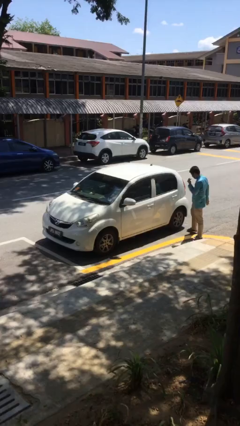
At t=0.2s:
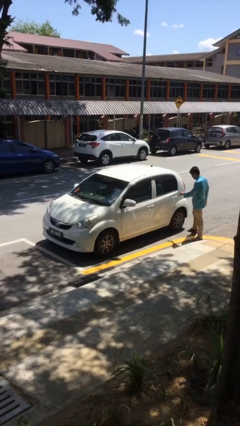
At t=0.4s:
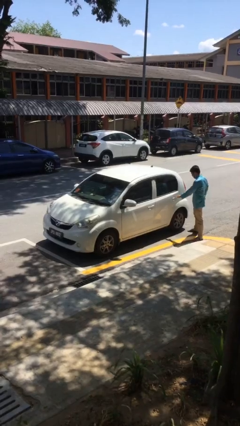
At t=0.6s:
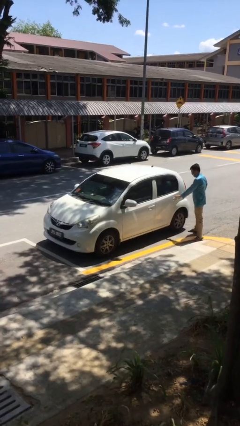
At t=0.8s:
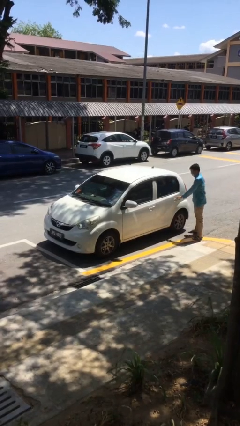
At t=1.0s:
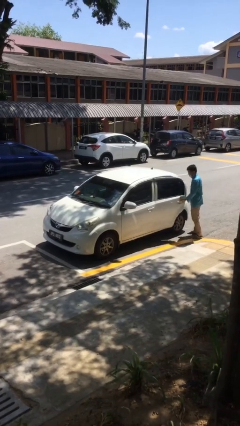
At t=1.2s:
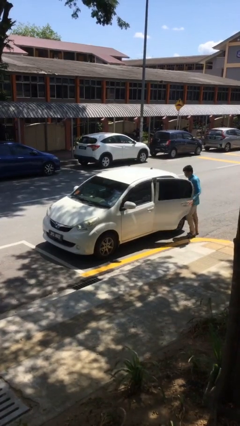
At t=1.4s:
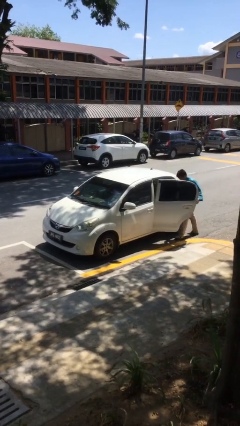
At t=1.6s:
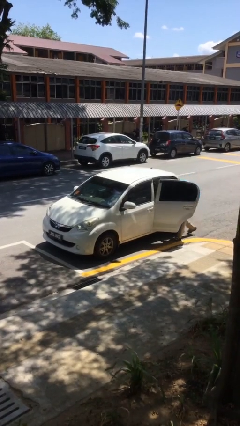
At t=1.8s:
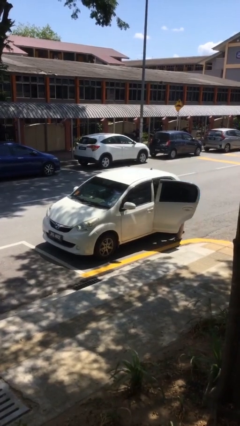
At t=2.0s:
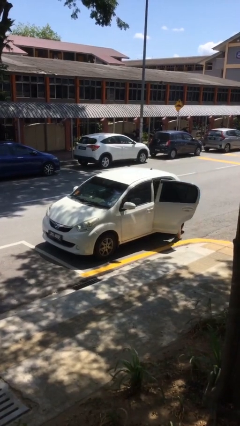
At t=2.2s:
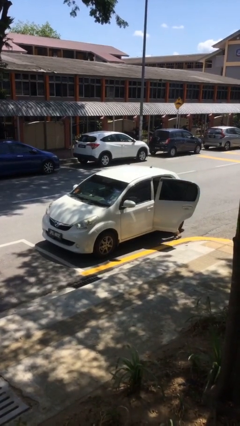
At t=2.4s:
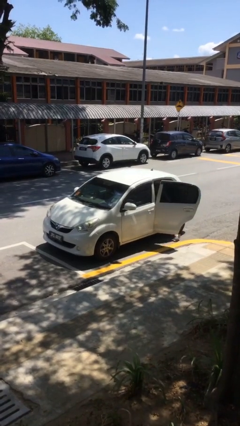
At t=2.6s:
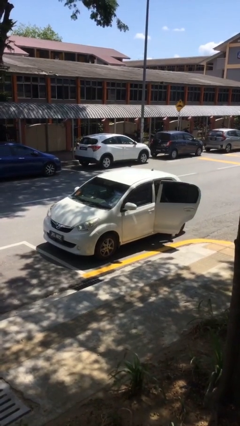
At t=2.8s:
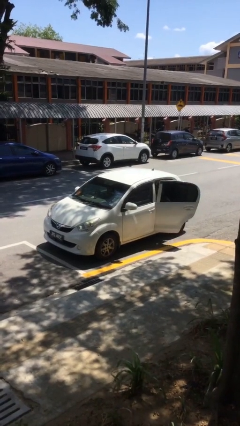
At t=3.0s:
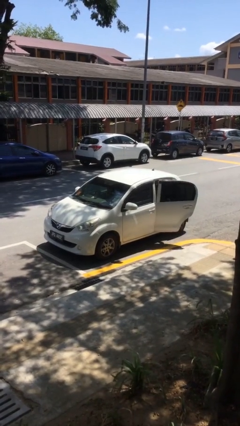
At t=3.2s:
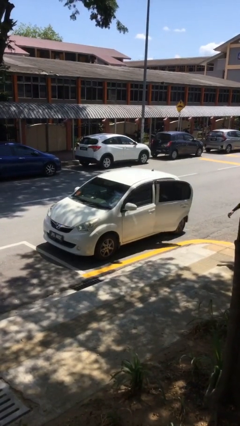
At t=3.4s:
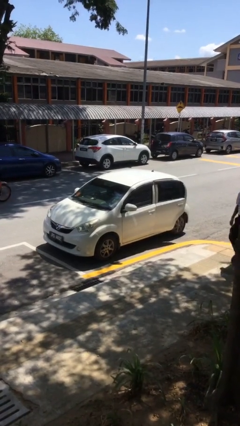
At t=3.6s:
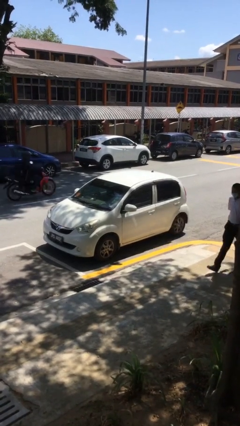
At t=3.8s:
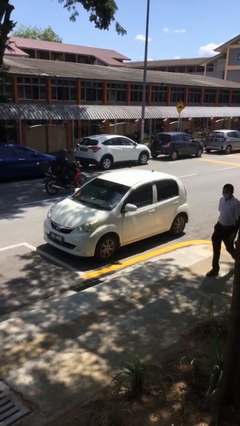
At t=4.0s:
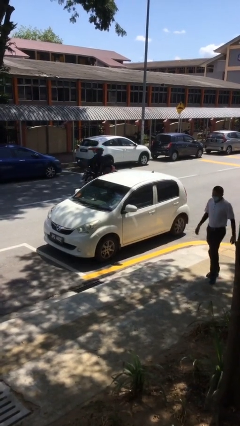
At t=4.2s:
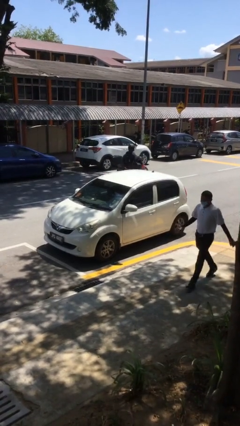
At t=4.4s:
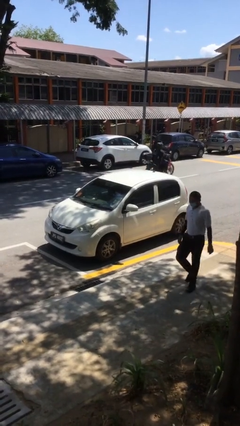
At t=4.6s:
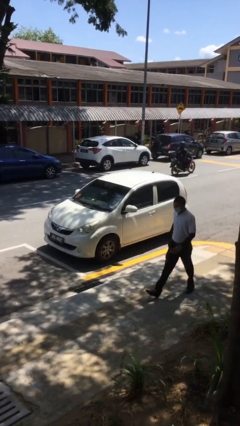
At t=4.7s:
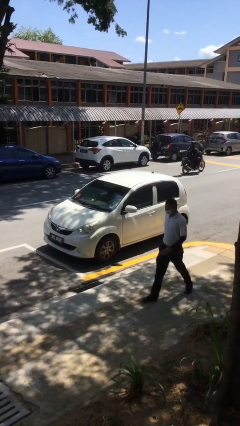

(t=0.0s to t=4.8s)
car picks up person

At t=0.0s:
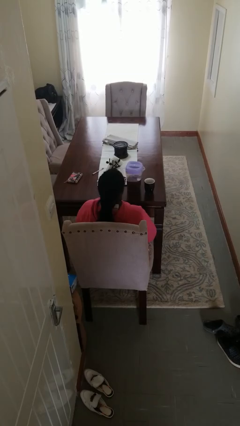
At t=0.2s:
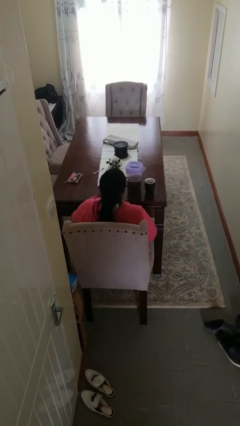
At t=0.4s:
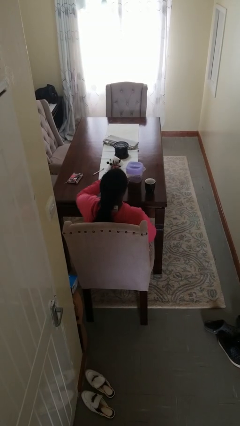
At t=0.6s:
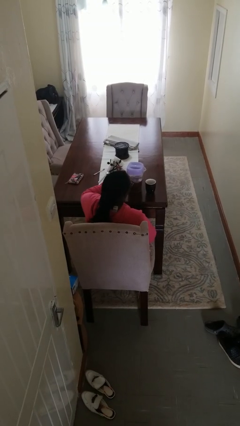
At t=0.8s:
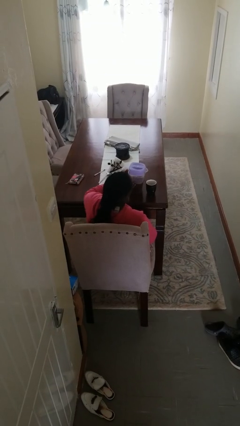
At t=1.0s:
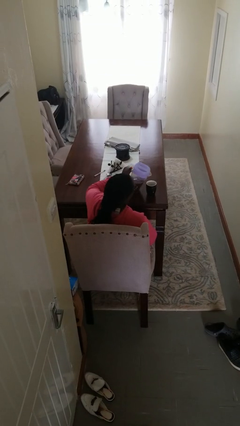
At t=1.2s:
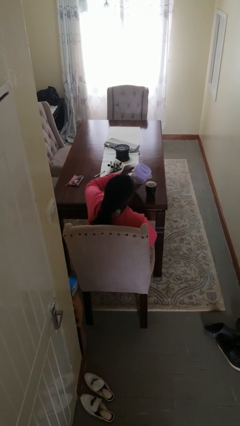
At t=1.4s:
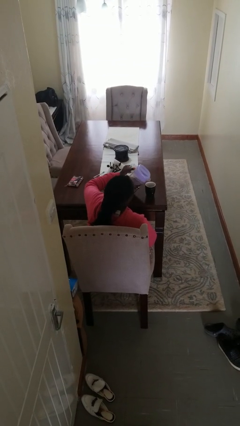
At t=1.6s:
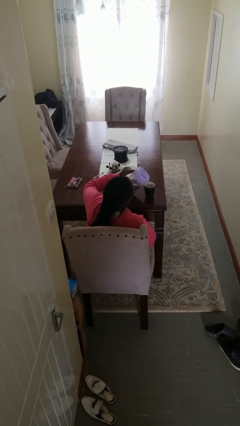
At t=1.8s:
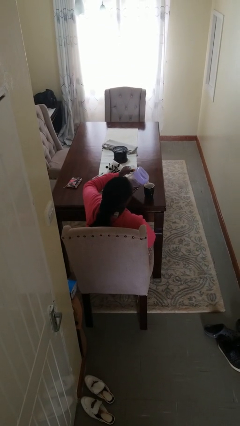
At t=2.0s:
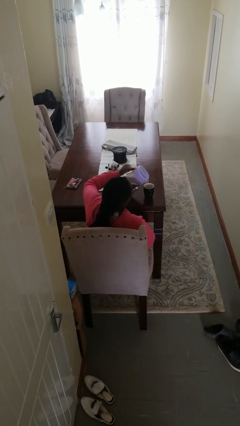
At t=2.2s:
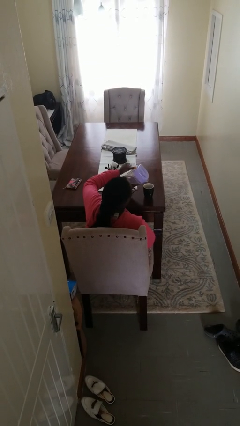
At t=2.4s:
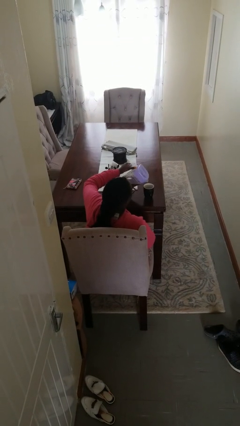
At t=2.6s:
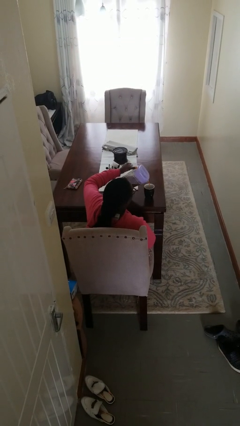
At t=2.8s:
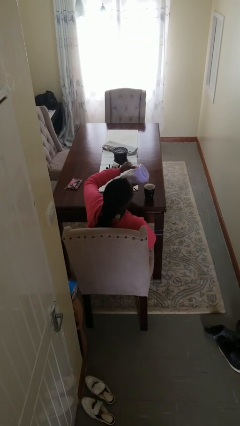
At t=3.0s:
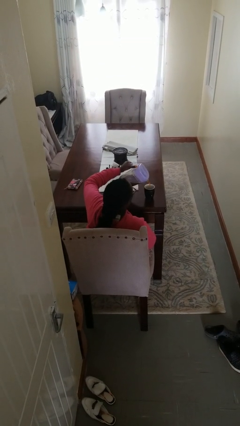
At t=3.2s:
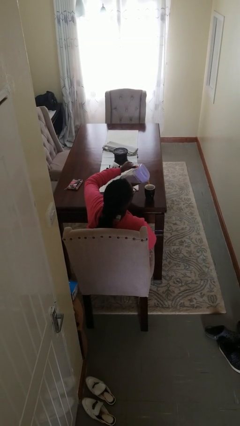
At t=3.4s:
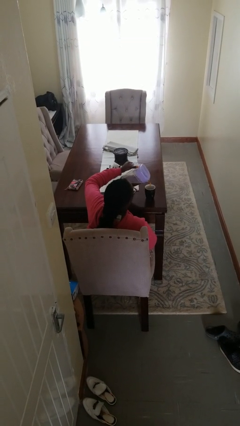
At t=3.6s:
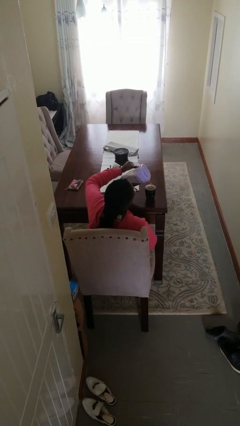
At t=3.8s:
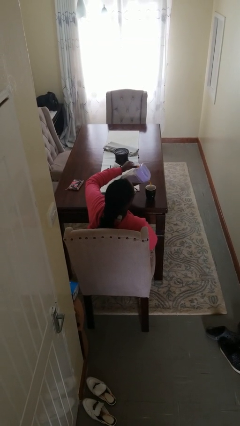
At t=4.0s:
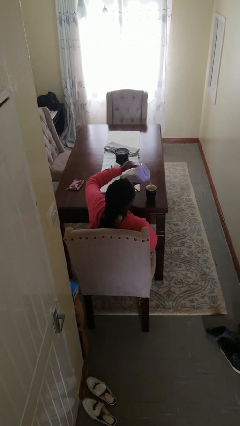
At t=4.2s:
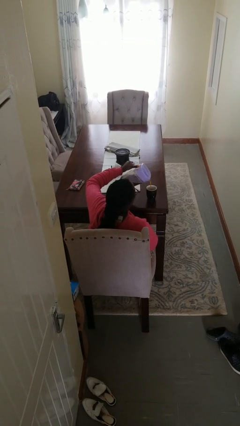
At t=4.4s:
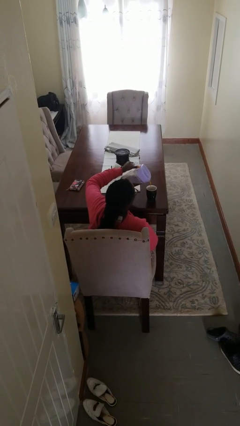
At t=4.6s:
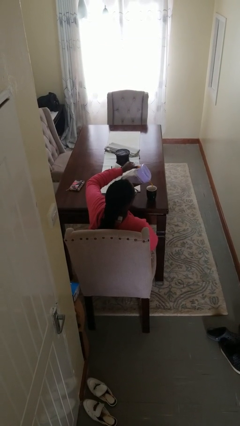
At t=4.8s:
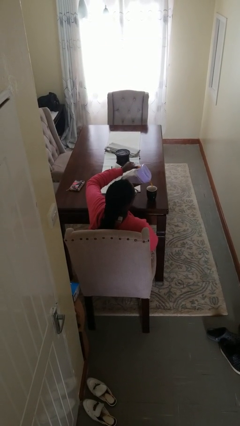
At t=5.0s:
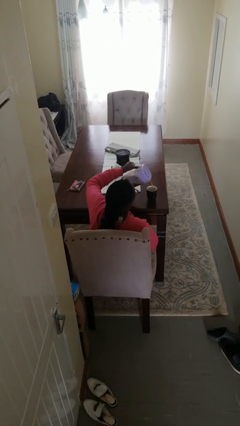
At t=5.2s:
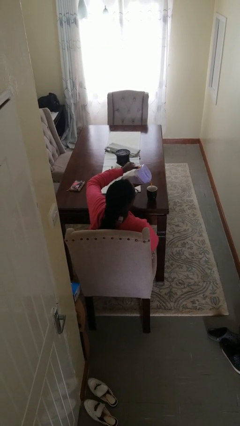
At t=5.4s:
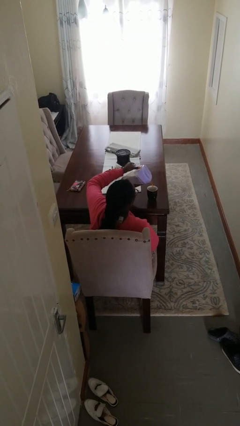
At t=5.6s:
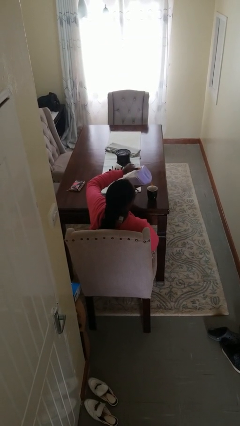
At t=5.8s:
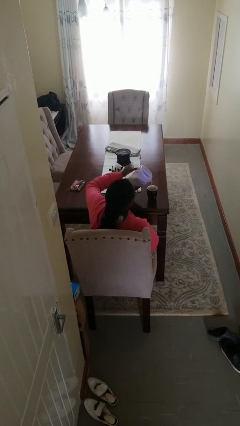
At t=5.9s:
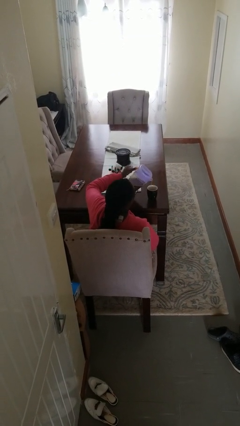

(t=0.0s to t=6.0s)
person pours coffee into mug

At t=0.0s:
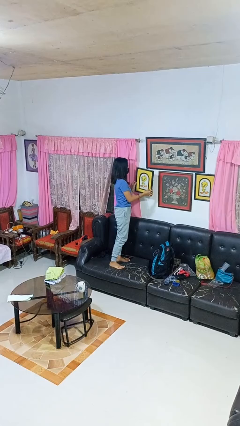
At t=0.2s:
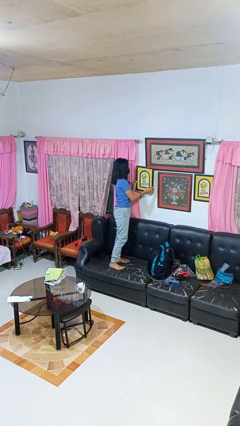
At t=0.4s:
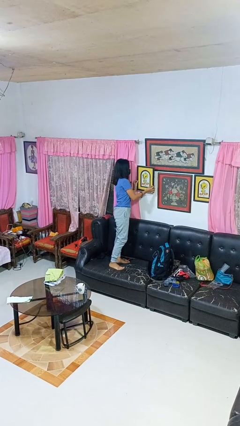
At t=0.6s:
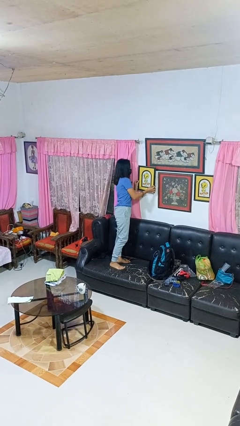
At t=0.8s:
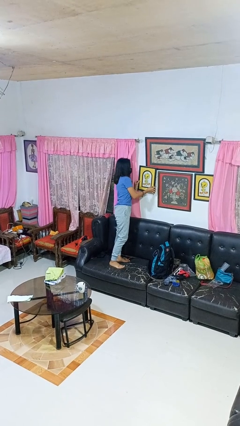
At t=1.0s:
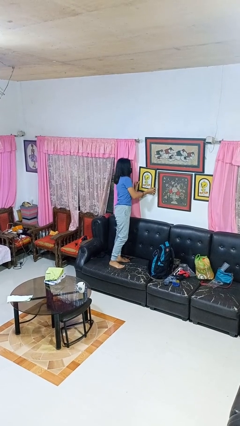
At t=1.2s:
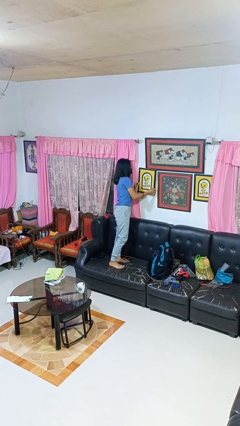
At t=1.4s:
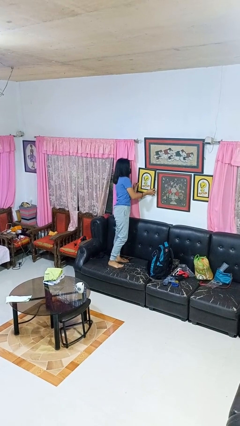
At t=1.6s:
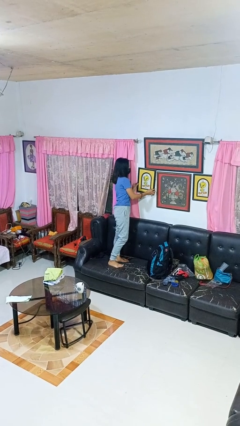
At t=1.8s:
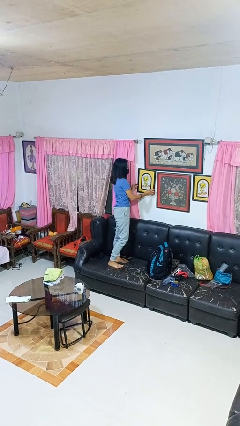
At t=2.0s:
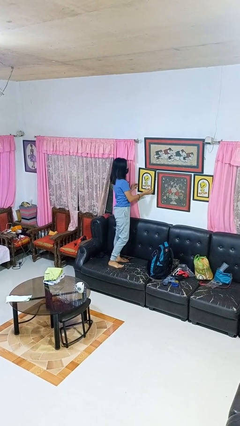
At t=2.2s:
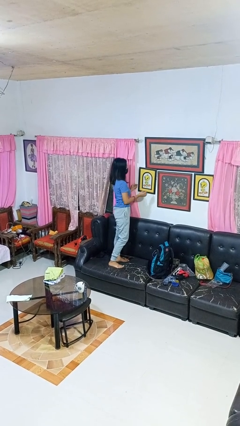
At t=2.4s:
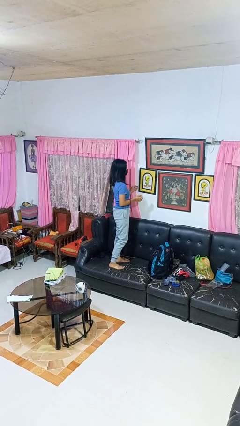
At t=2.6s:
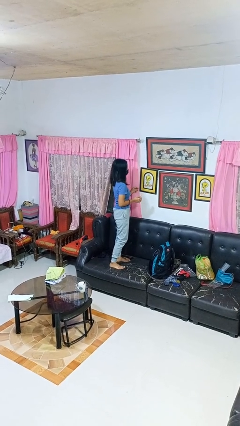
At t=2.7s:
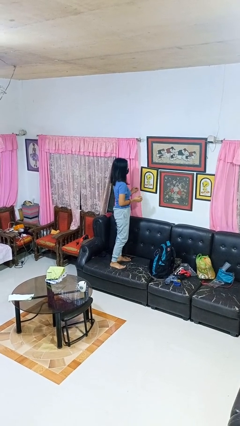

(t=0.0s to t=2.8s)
person puts up picture frame

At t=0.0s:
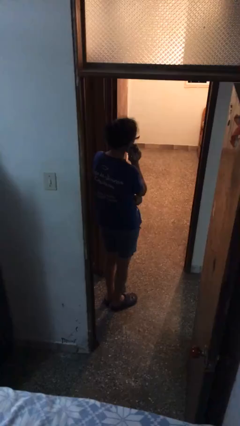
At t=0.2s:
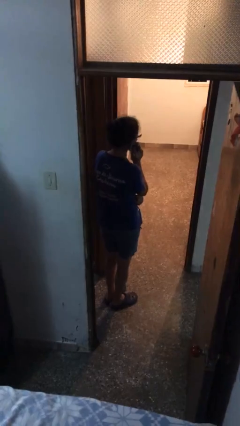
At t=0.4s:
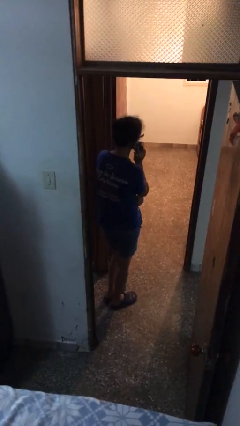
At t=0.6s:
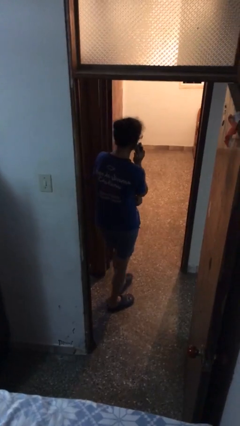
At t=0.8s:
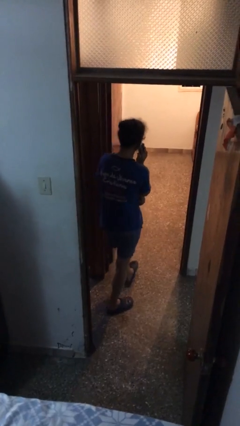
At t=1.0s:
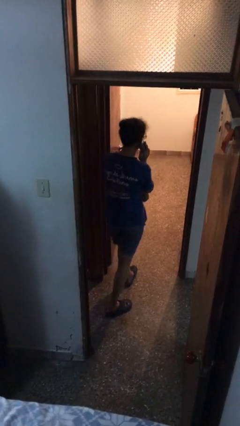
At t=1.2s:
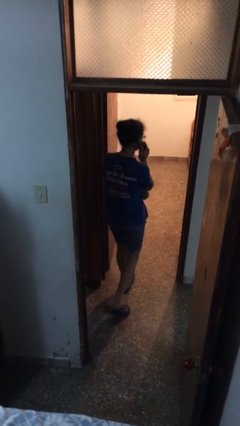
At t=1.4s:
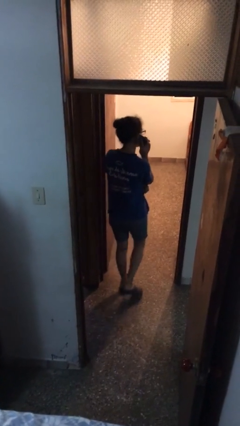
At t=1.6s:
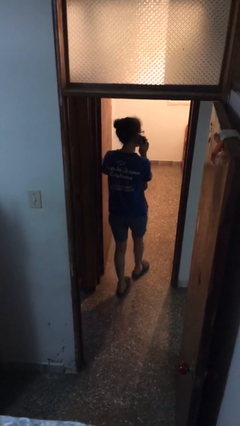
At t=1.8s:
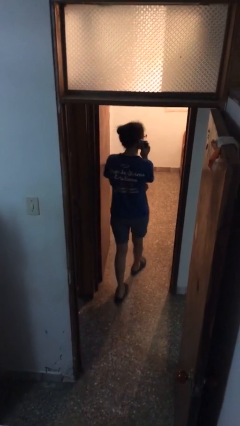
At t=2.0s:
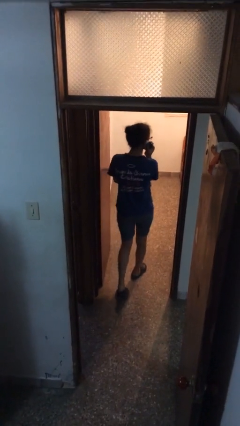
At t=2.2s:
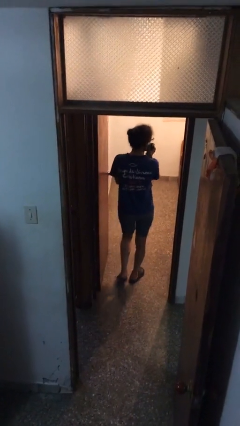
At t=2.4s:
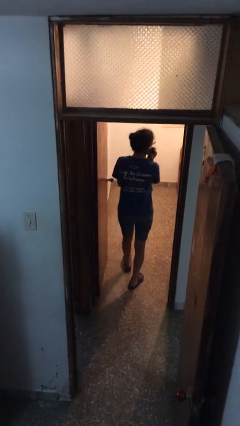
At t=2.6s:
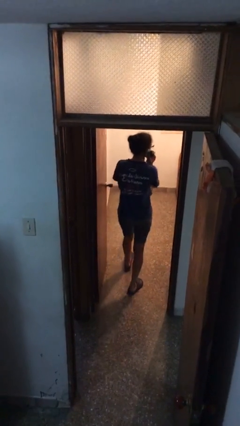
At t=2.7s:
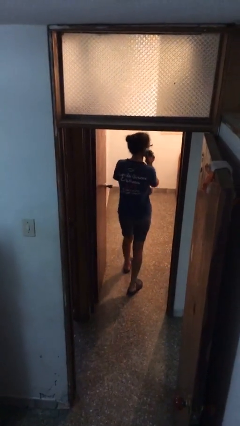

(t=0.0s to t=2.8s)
person exits scene through structure

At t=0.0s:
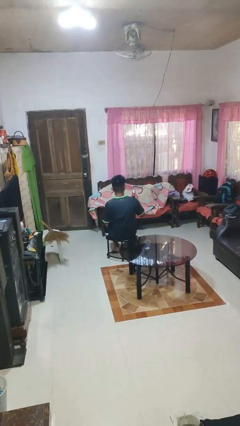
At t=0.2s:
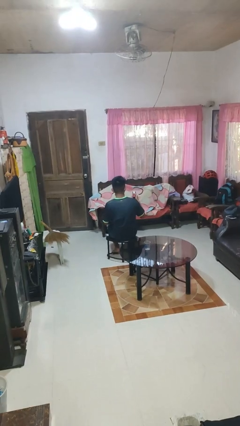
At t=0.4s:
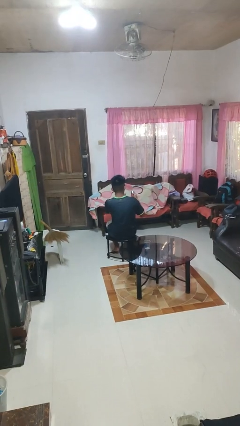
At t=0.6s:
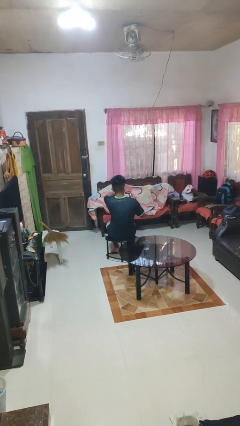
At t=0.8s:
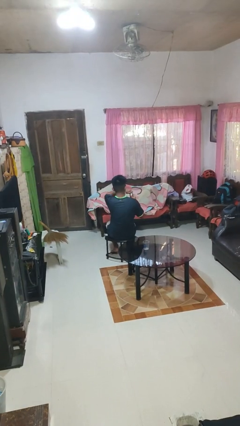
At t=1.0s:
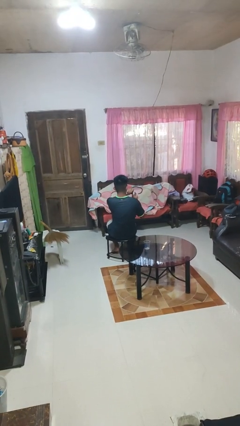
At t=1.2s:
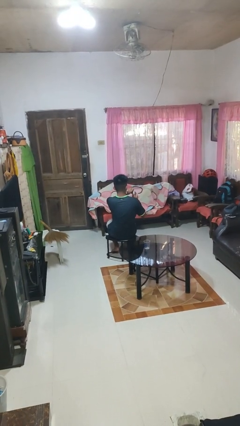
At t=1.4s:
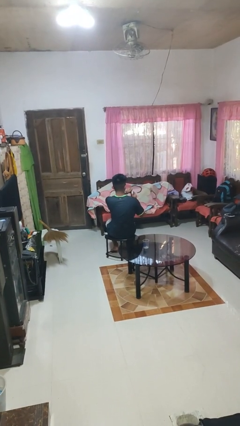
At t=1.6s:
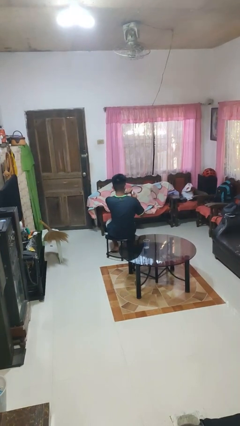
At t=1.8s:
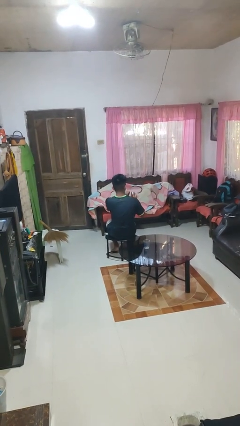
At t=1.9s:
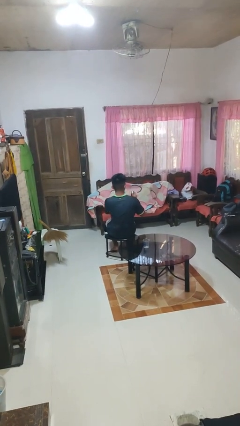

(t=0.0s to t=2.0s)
person opens beverage can
